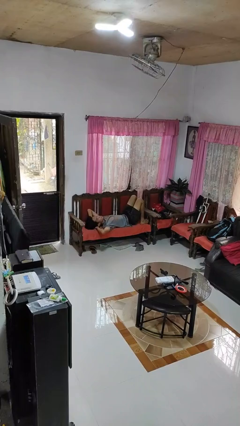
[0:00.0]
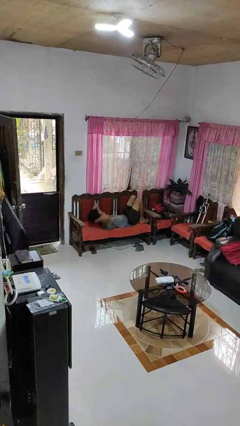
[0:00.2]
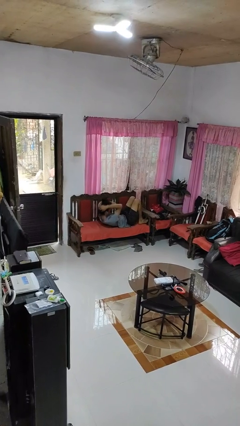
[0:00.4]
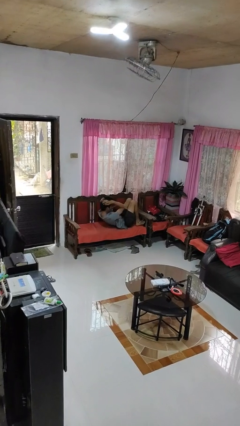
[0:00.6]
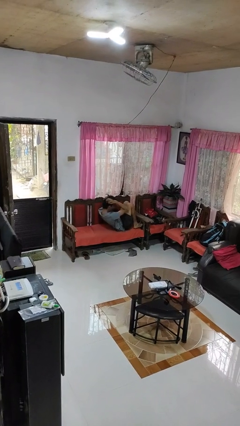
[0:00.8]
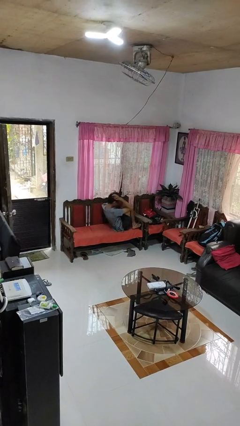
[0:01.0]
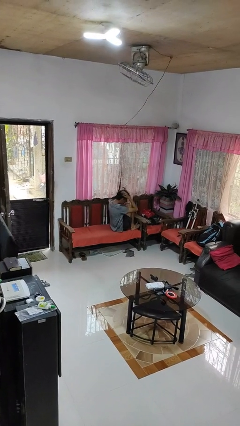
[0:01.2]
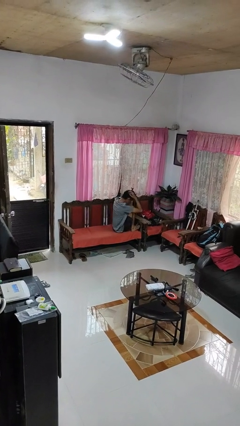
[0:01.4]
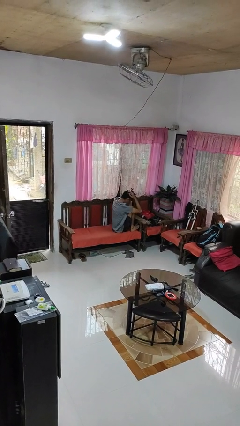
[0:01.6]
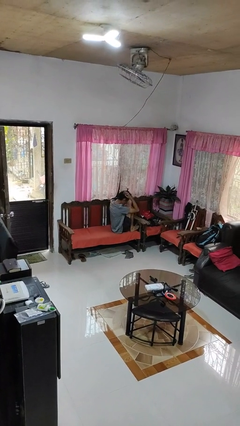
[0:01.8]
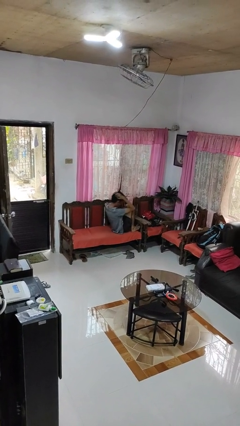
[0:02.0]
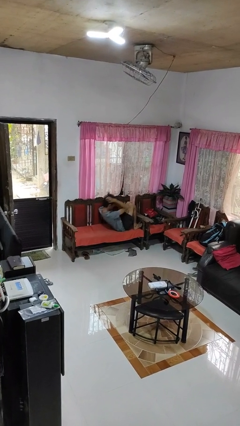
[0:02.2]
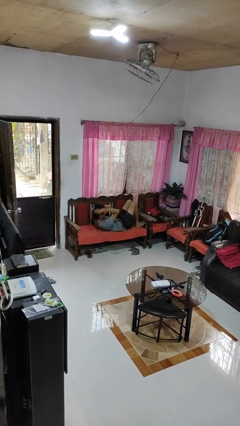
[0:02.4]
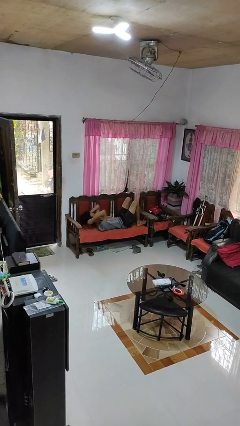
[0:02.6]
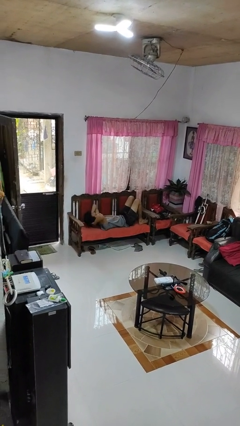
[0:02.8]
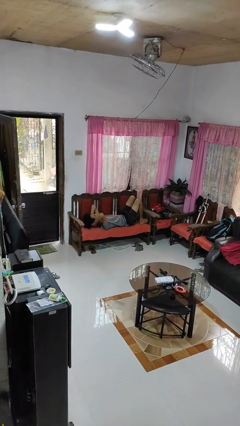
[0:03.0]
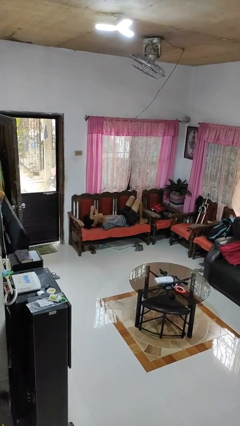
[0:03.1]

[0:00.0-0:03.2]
person exercises with situp

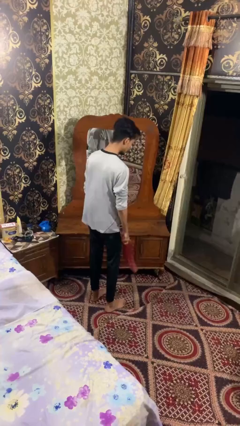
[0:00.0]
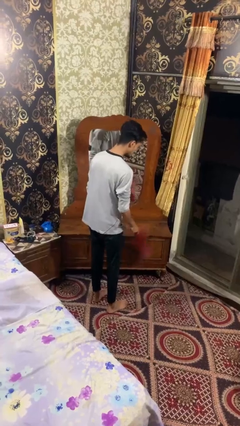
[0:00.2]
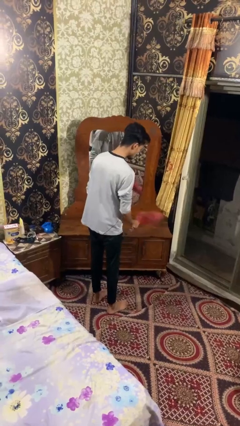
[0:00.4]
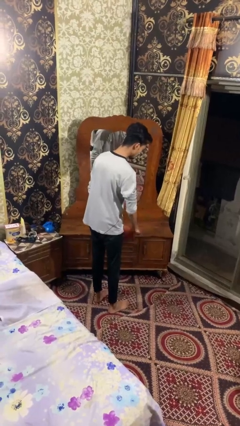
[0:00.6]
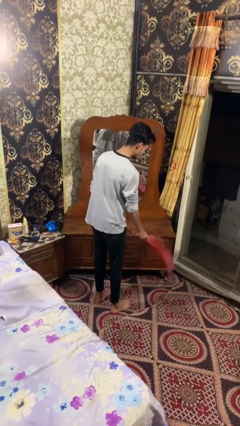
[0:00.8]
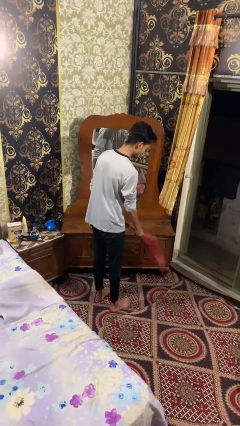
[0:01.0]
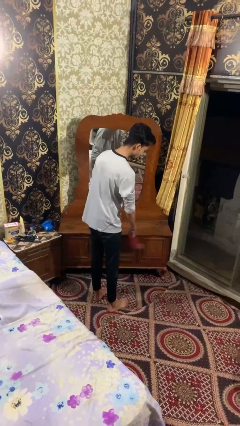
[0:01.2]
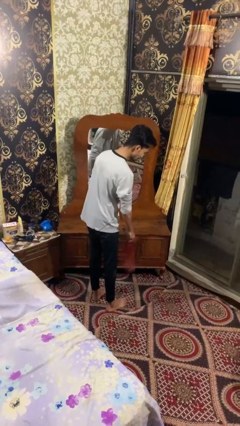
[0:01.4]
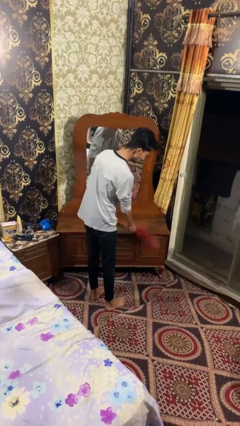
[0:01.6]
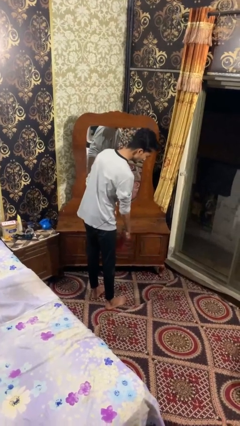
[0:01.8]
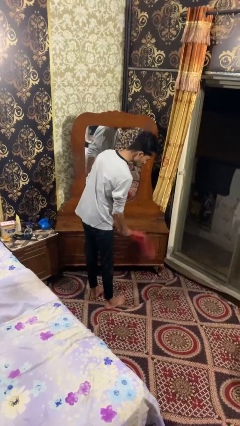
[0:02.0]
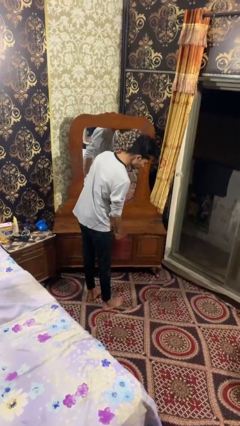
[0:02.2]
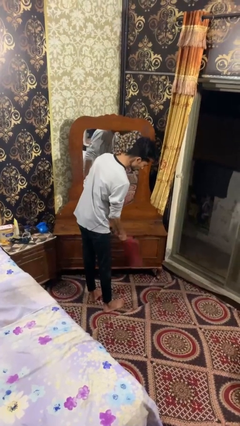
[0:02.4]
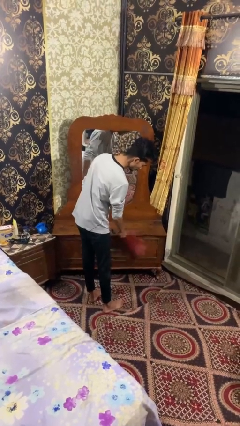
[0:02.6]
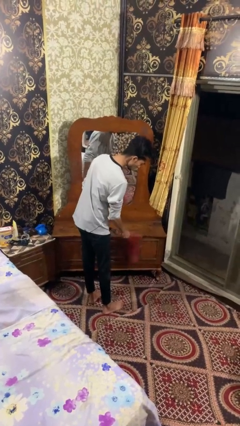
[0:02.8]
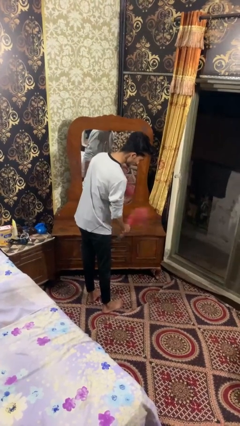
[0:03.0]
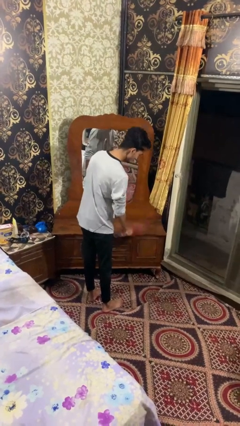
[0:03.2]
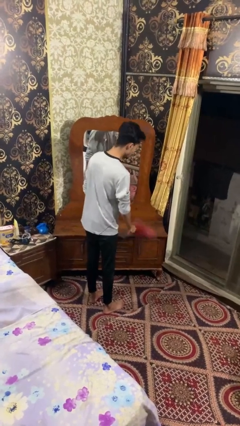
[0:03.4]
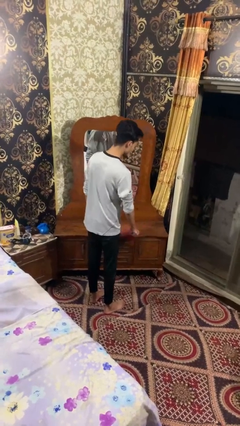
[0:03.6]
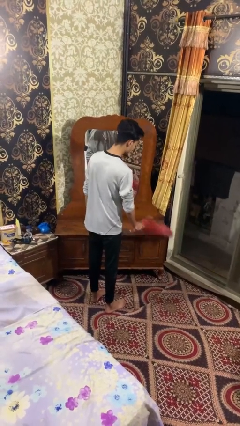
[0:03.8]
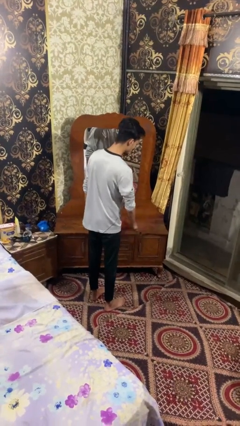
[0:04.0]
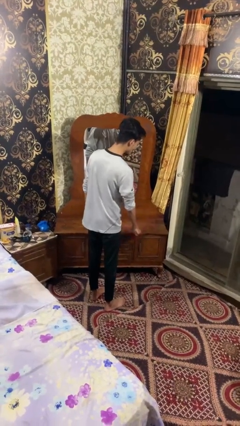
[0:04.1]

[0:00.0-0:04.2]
person dusts furniture

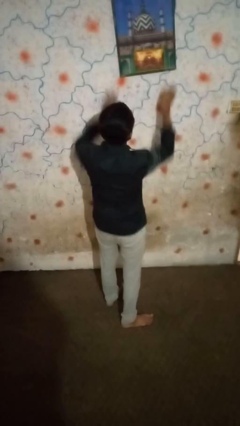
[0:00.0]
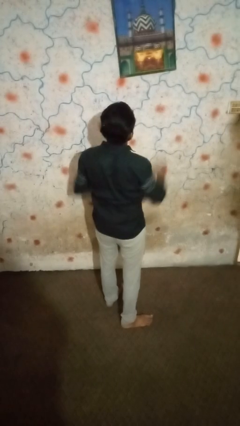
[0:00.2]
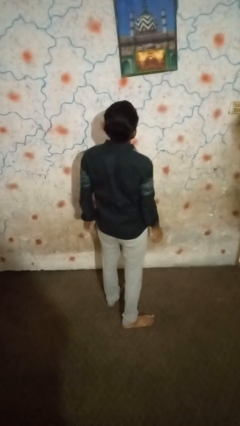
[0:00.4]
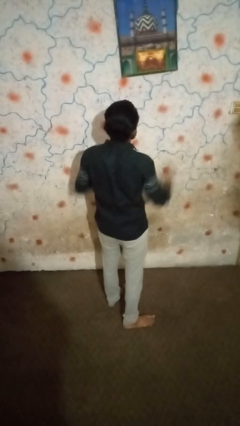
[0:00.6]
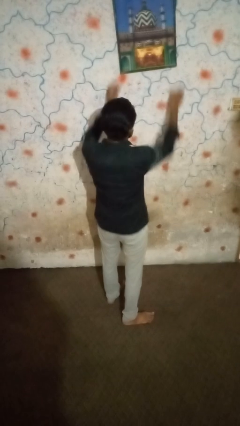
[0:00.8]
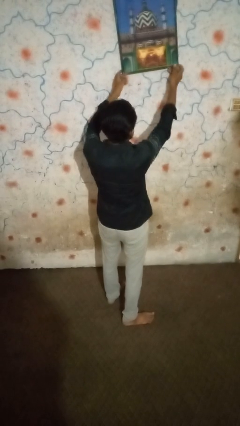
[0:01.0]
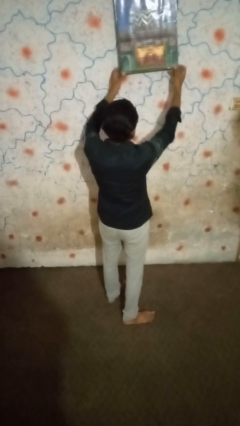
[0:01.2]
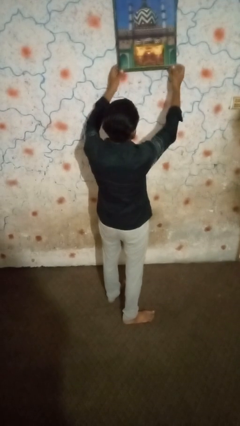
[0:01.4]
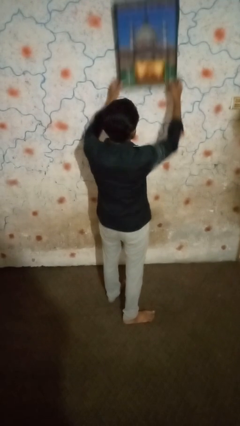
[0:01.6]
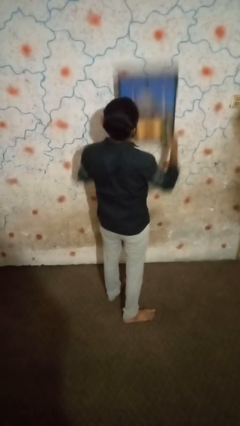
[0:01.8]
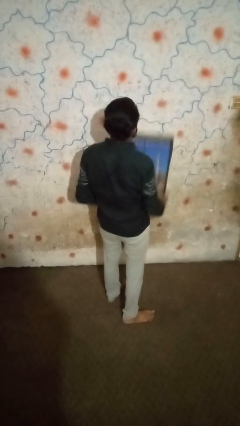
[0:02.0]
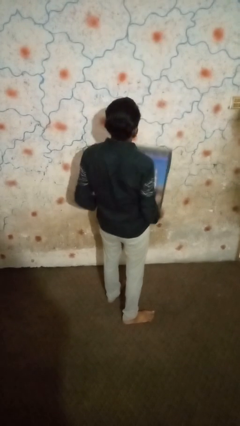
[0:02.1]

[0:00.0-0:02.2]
person takes down picture frame

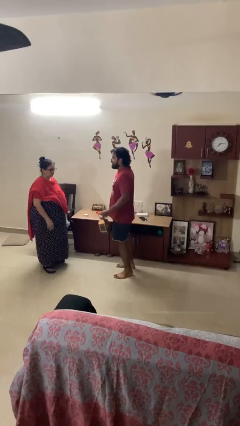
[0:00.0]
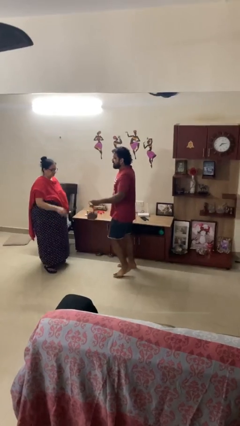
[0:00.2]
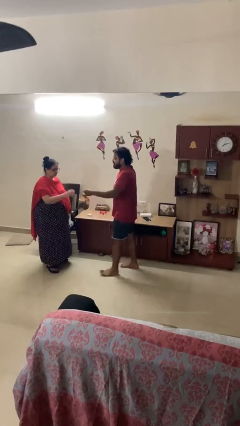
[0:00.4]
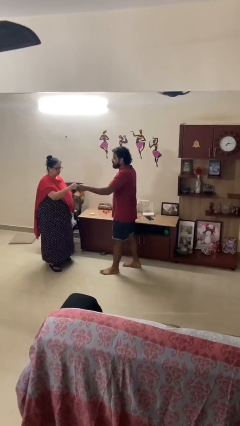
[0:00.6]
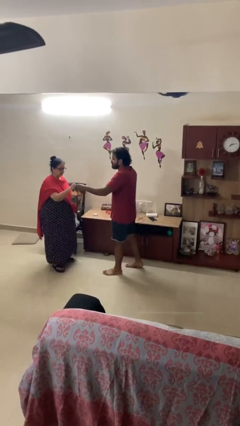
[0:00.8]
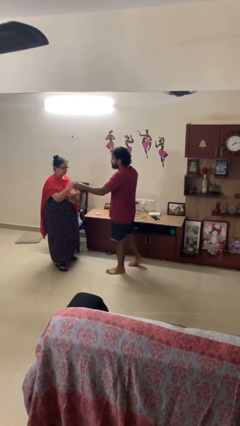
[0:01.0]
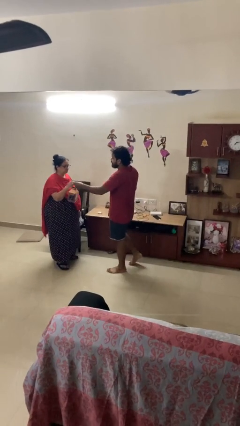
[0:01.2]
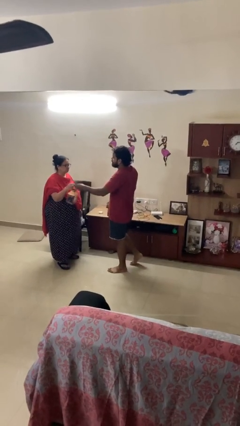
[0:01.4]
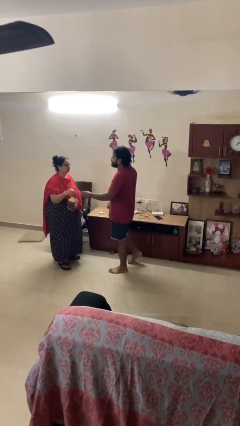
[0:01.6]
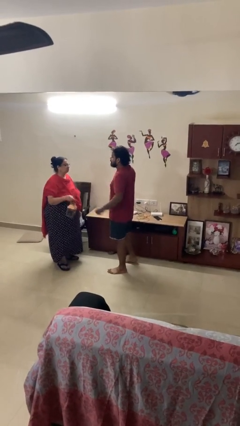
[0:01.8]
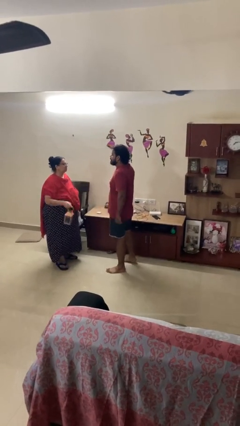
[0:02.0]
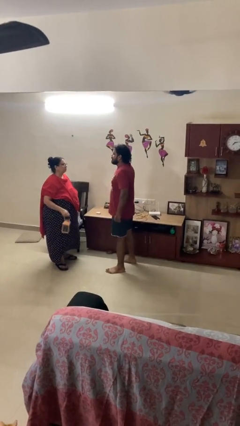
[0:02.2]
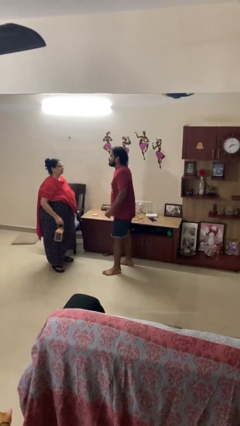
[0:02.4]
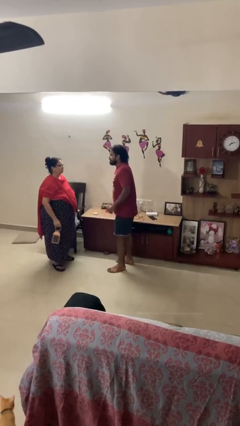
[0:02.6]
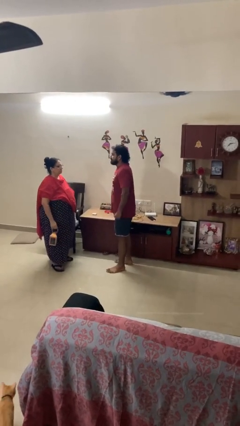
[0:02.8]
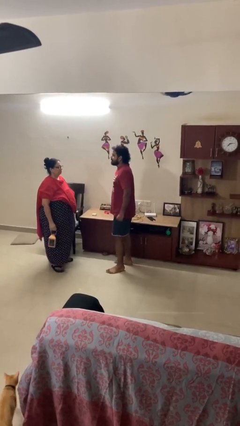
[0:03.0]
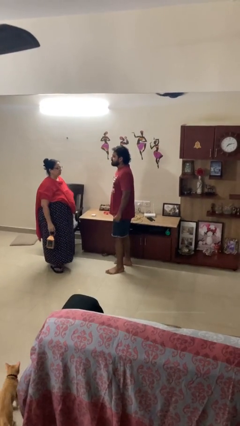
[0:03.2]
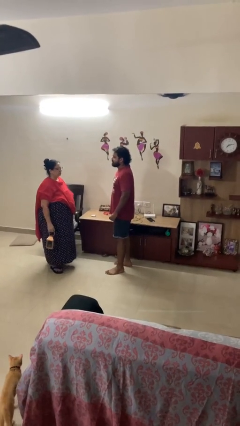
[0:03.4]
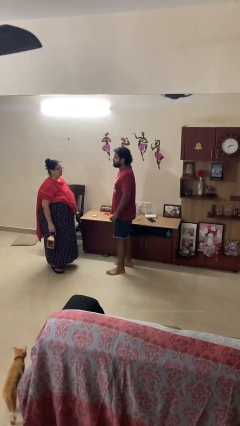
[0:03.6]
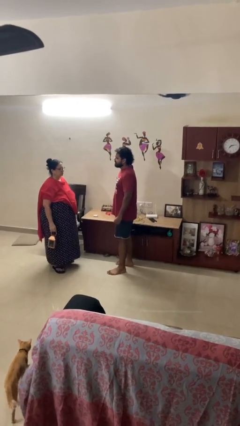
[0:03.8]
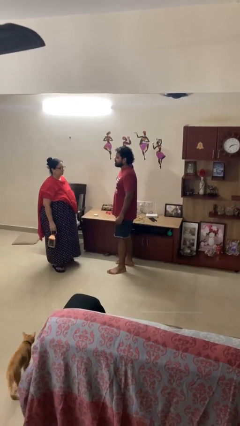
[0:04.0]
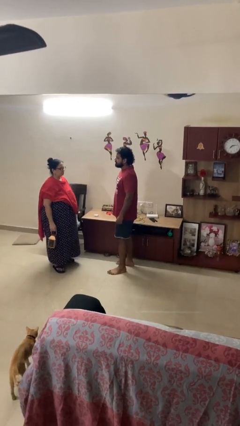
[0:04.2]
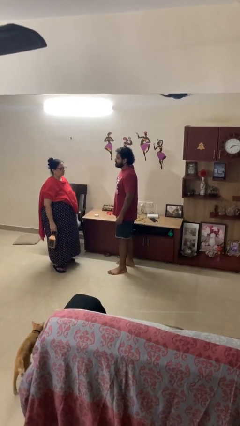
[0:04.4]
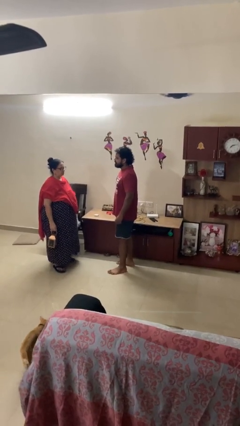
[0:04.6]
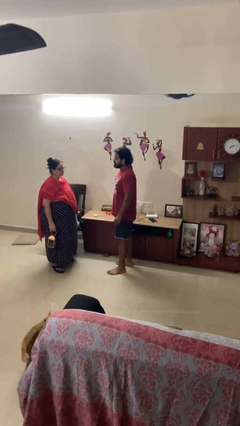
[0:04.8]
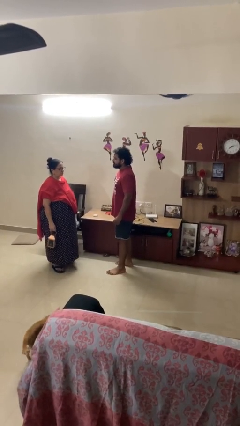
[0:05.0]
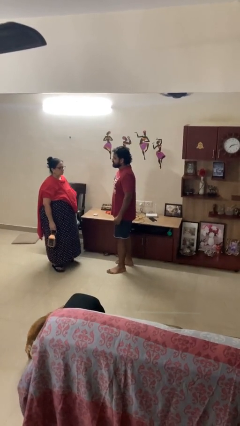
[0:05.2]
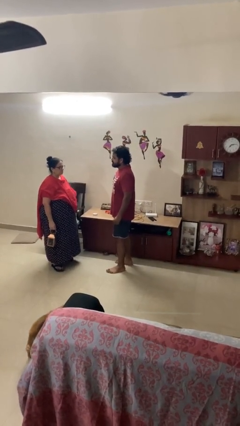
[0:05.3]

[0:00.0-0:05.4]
person transfers object to person

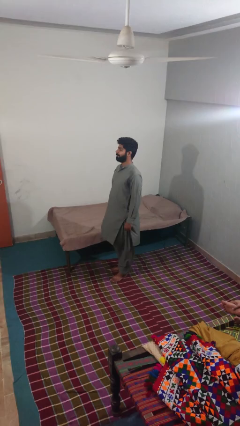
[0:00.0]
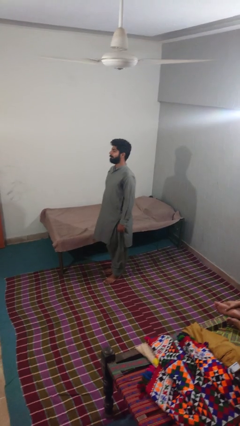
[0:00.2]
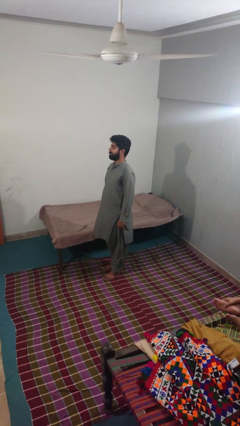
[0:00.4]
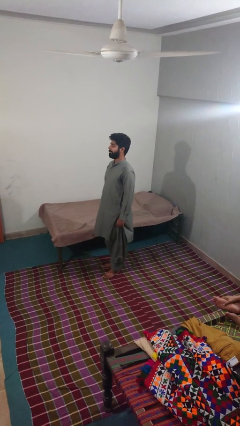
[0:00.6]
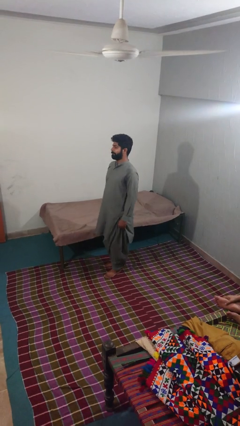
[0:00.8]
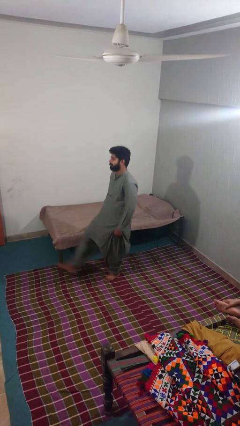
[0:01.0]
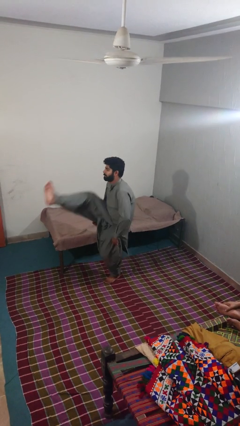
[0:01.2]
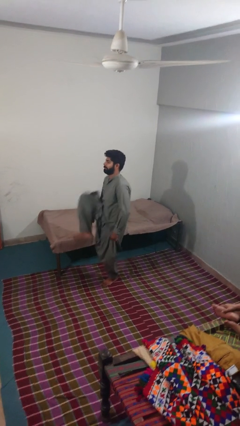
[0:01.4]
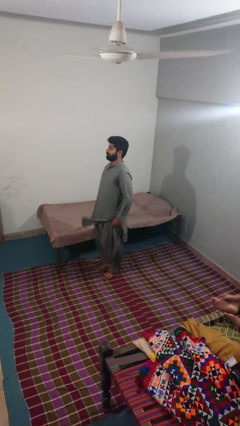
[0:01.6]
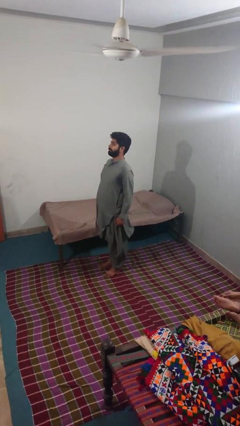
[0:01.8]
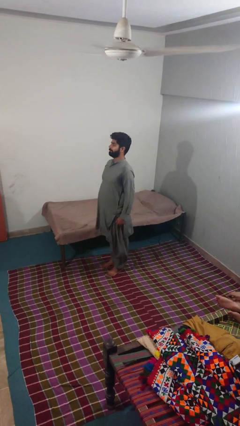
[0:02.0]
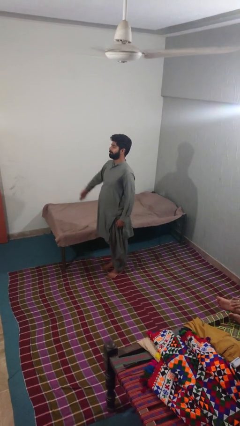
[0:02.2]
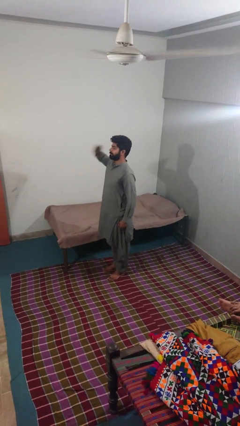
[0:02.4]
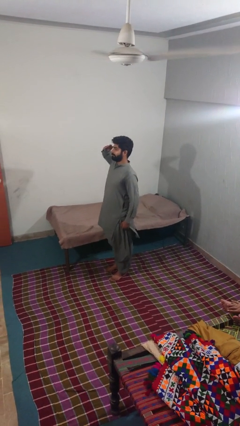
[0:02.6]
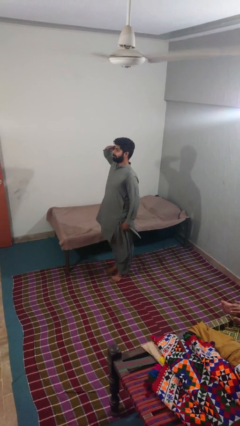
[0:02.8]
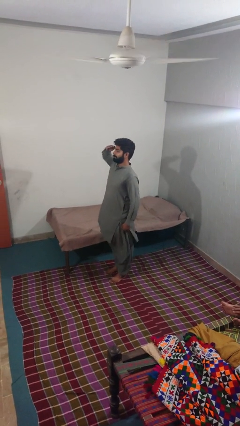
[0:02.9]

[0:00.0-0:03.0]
person salutes
